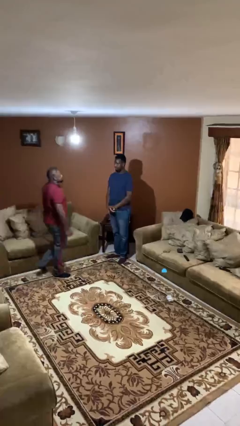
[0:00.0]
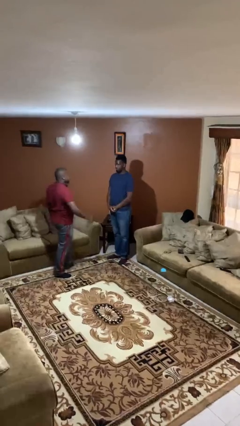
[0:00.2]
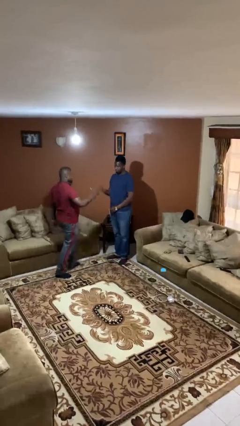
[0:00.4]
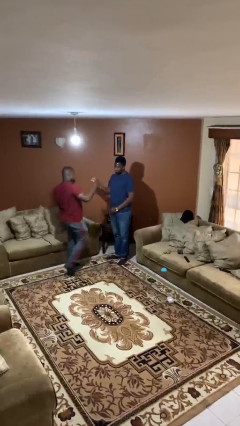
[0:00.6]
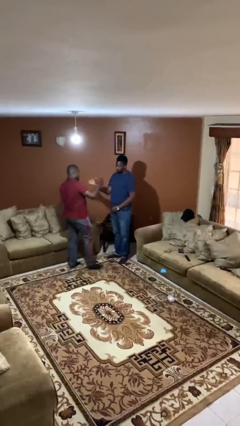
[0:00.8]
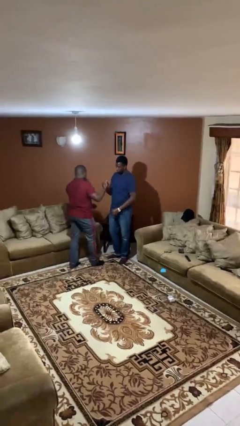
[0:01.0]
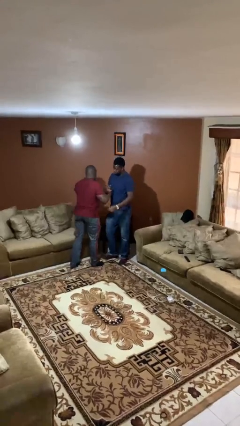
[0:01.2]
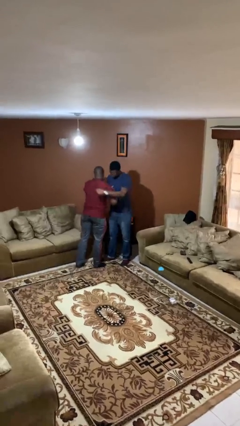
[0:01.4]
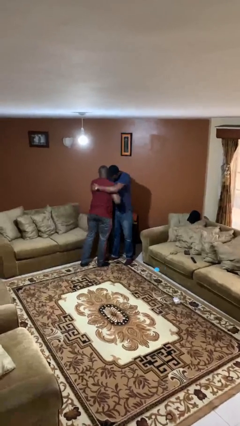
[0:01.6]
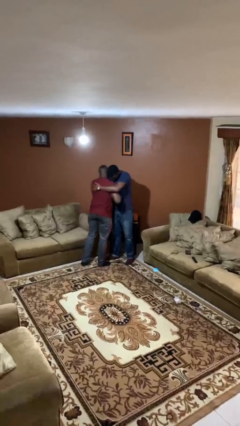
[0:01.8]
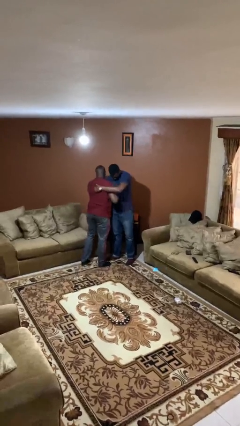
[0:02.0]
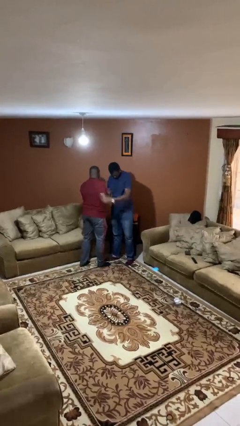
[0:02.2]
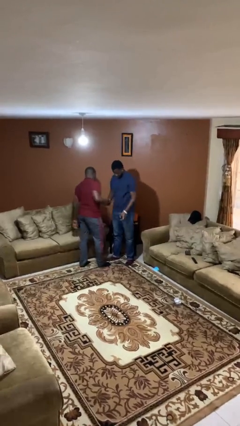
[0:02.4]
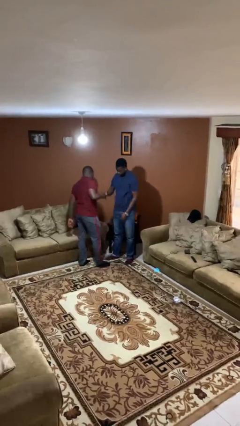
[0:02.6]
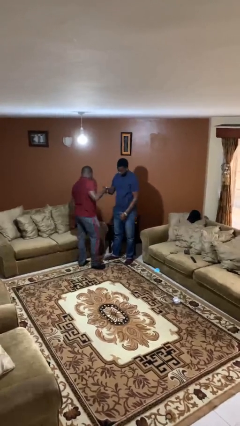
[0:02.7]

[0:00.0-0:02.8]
person embraces person

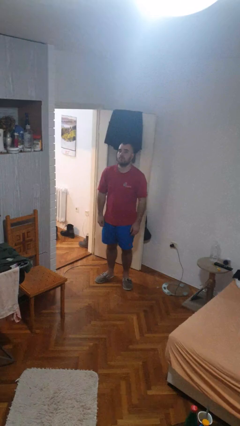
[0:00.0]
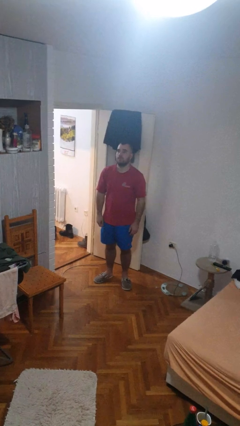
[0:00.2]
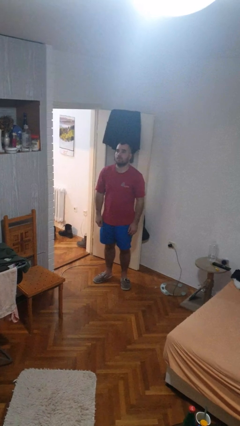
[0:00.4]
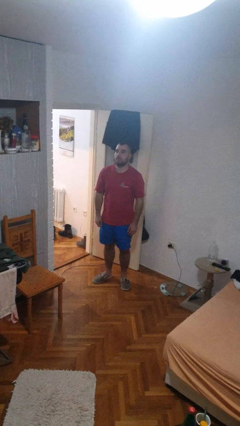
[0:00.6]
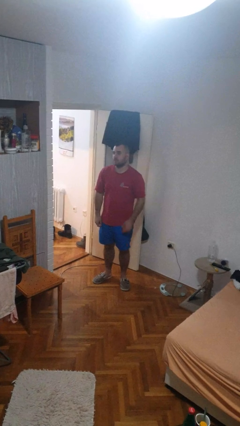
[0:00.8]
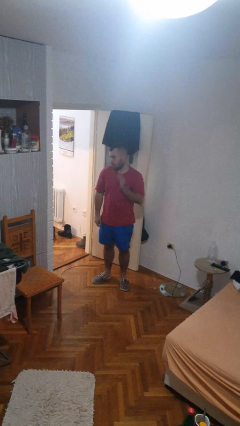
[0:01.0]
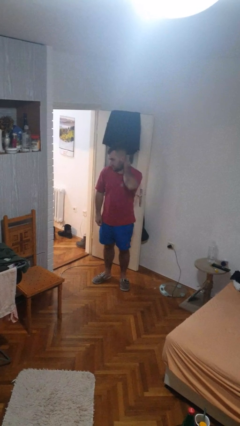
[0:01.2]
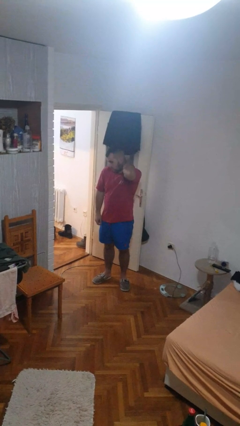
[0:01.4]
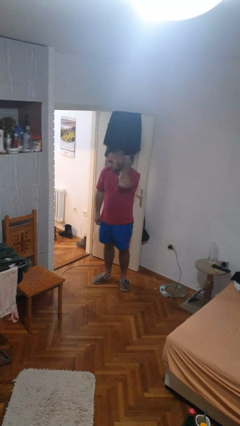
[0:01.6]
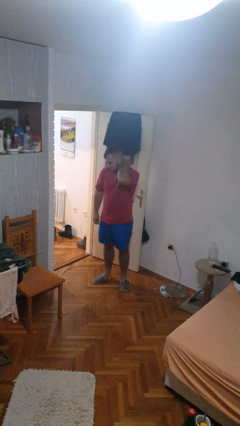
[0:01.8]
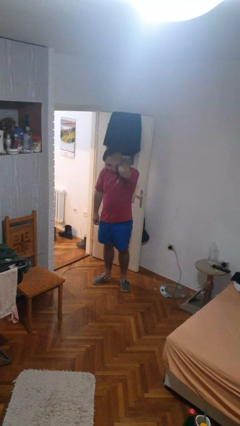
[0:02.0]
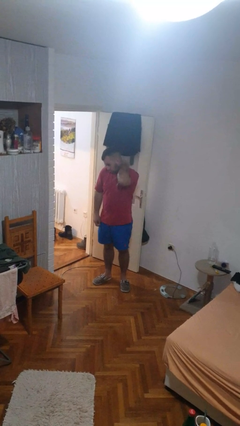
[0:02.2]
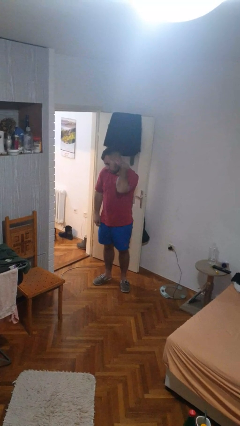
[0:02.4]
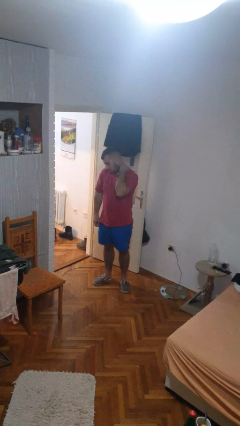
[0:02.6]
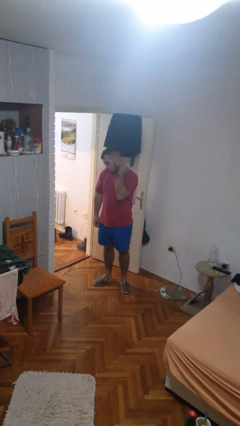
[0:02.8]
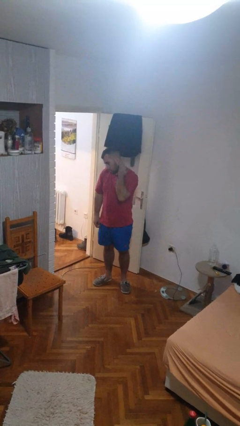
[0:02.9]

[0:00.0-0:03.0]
person rubs neck

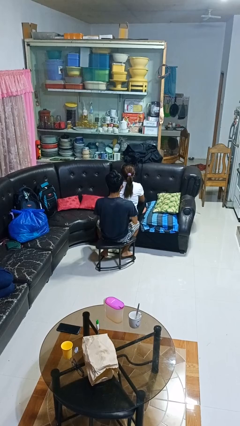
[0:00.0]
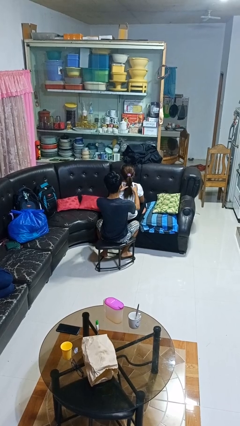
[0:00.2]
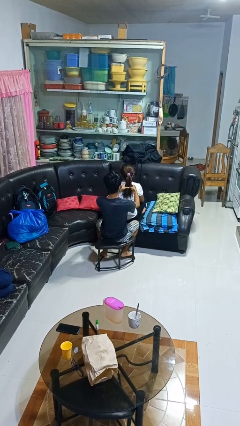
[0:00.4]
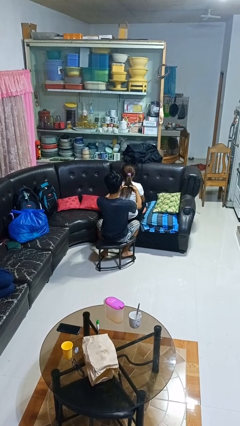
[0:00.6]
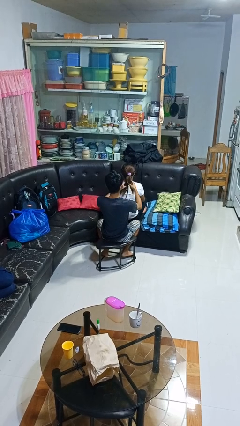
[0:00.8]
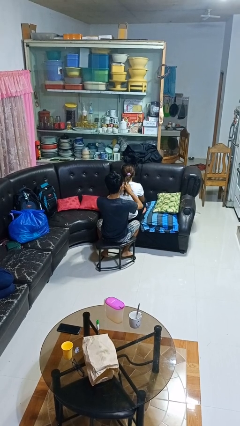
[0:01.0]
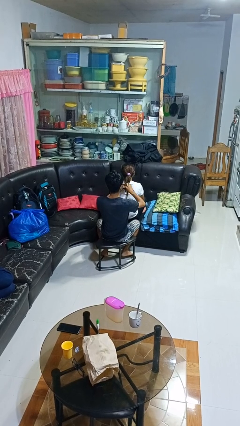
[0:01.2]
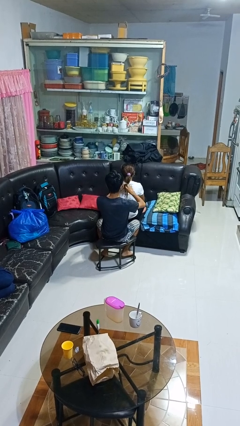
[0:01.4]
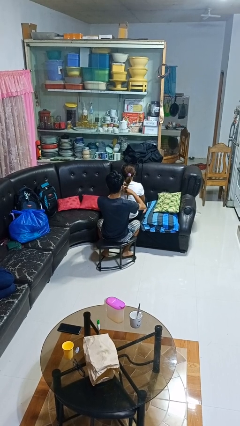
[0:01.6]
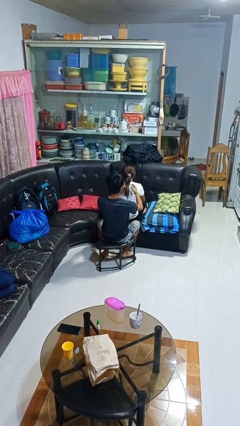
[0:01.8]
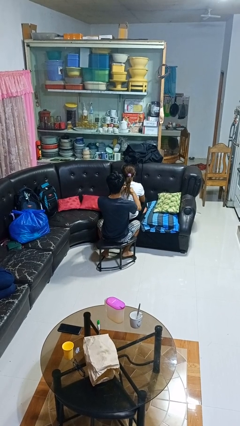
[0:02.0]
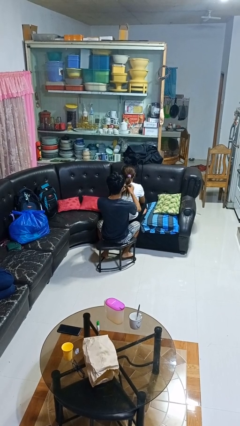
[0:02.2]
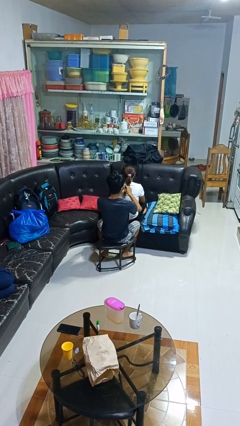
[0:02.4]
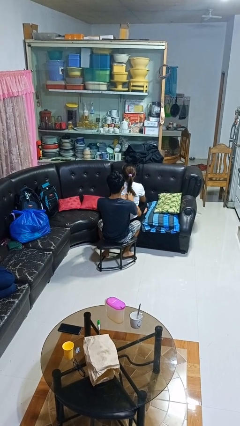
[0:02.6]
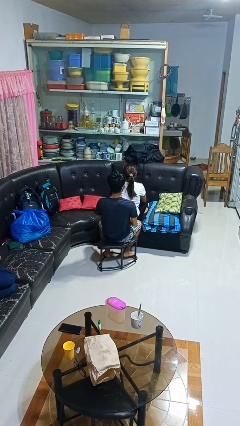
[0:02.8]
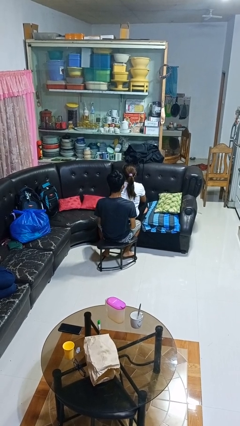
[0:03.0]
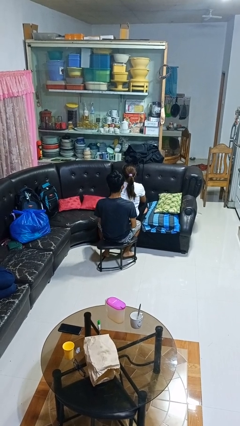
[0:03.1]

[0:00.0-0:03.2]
person braids hair of person

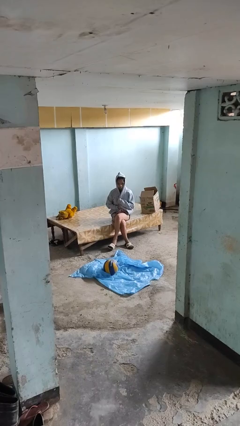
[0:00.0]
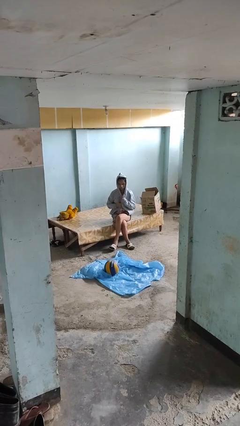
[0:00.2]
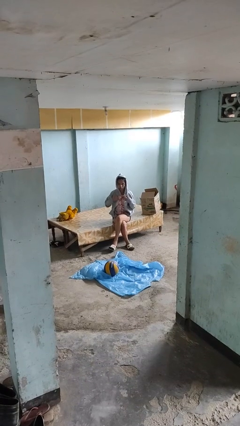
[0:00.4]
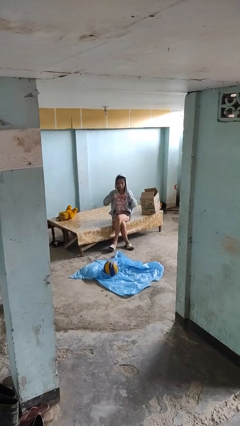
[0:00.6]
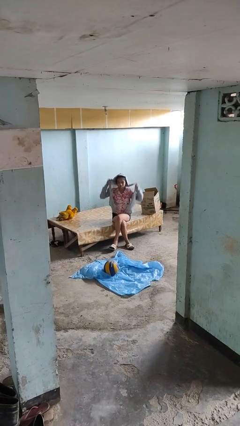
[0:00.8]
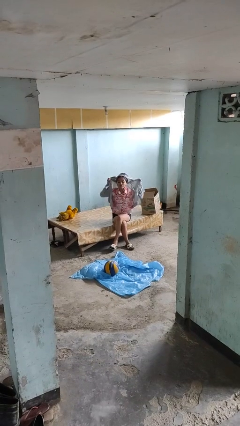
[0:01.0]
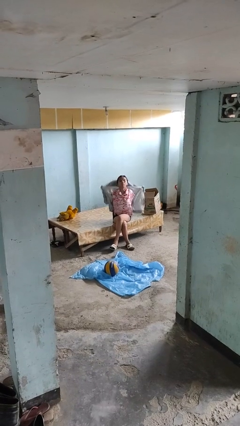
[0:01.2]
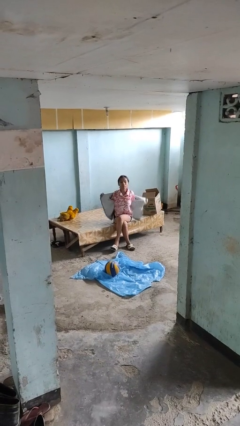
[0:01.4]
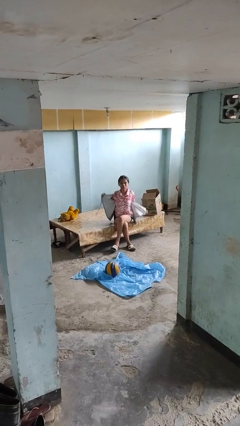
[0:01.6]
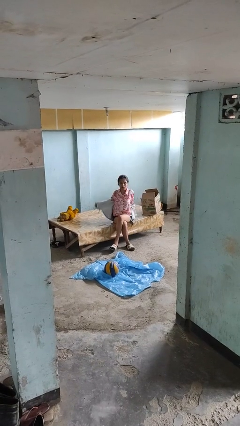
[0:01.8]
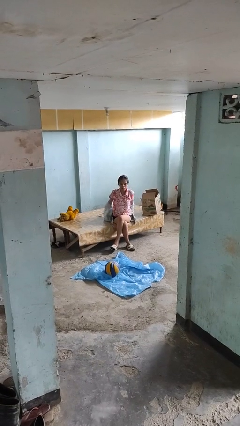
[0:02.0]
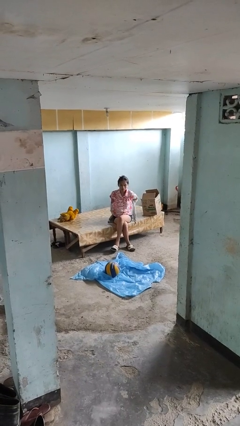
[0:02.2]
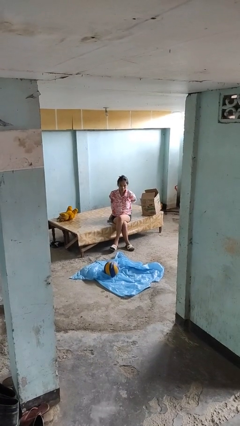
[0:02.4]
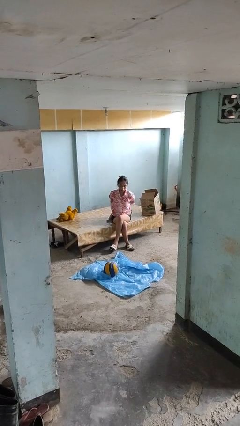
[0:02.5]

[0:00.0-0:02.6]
person takes off hoodie

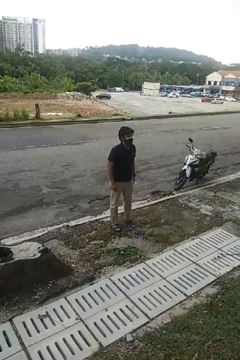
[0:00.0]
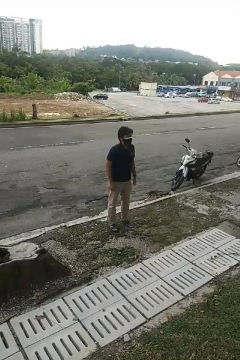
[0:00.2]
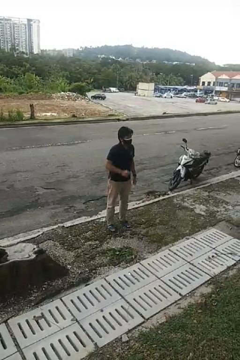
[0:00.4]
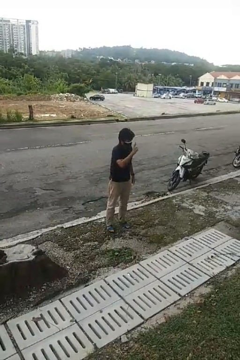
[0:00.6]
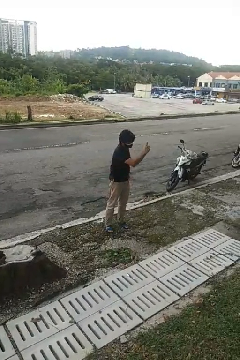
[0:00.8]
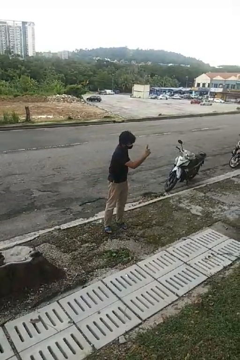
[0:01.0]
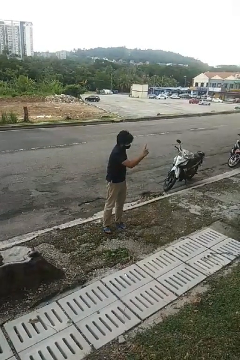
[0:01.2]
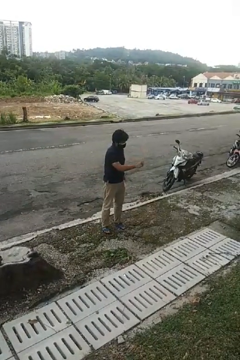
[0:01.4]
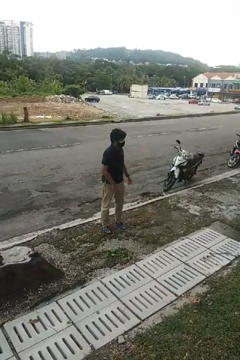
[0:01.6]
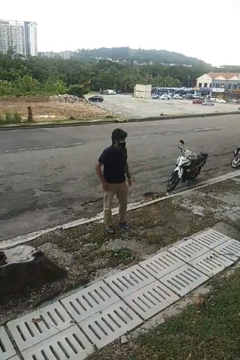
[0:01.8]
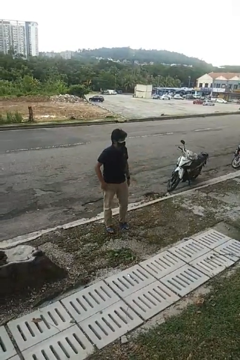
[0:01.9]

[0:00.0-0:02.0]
person gestures number one

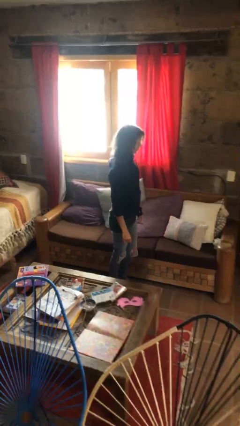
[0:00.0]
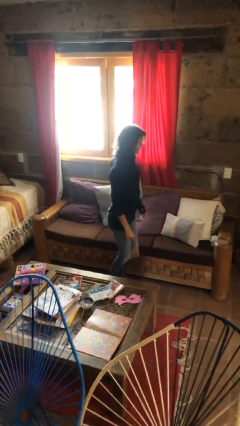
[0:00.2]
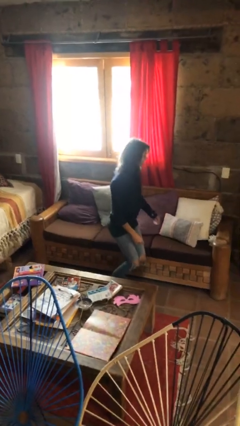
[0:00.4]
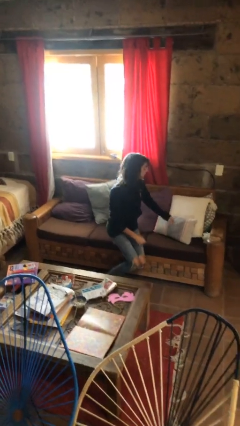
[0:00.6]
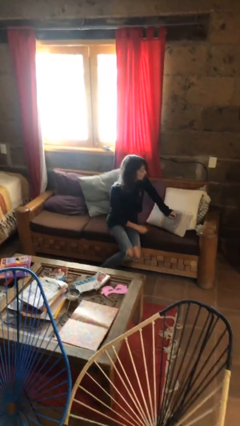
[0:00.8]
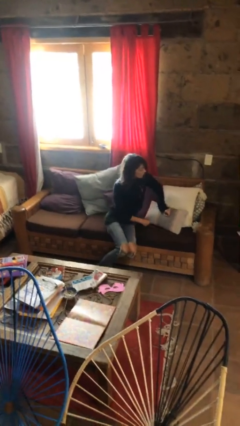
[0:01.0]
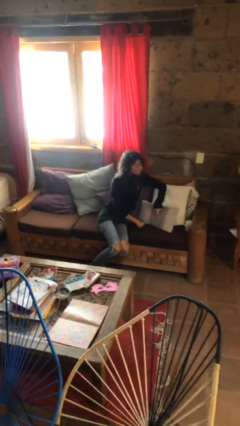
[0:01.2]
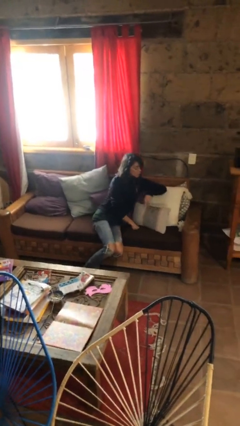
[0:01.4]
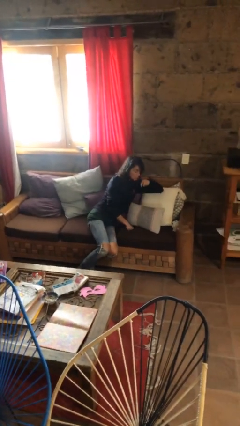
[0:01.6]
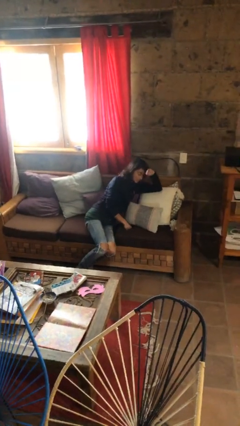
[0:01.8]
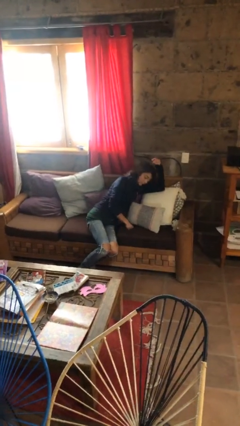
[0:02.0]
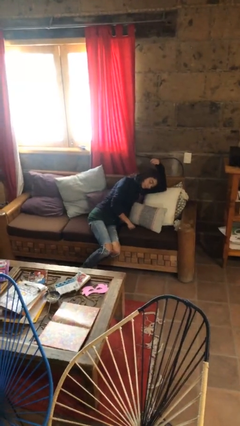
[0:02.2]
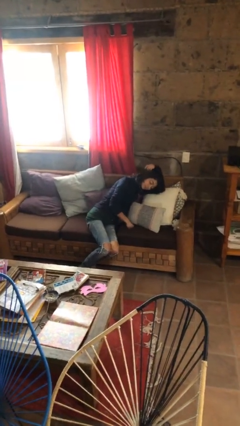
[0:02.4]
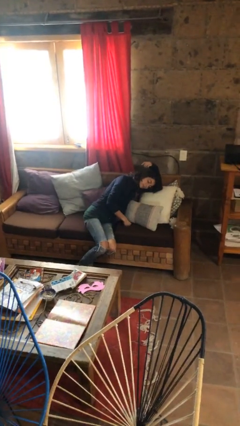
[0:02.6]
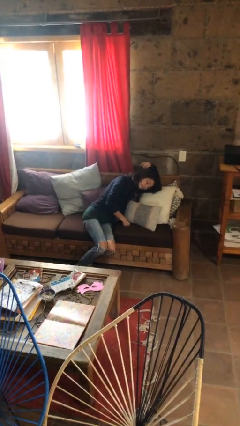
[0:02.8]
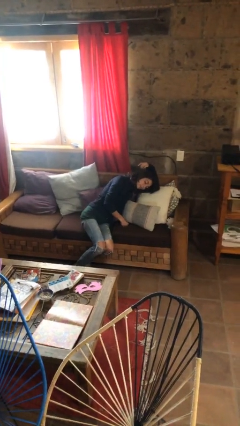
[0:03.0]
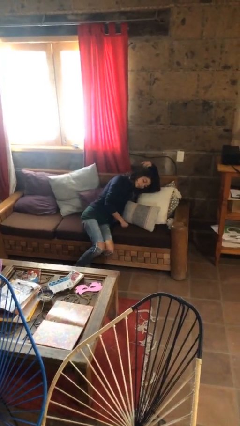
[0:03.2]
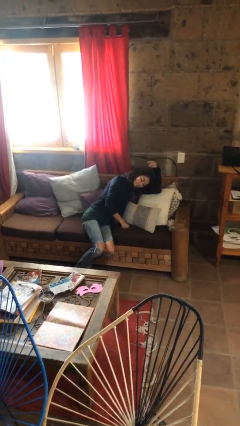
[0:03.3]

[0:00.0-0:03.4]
person lies down on couch

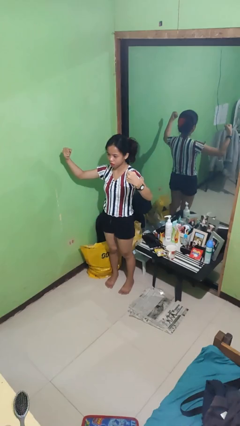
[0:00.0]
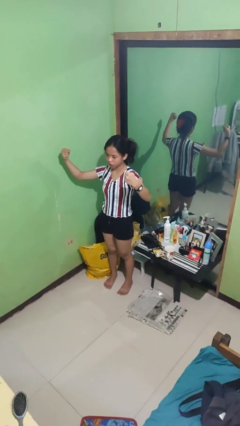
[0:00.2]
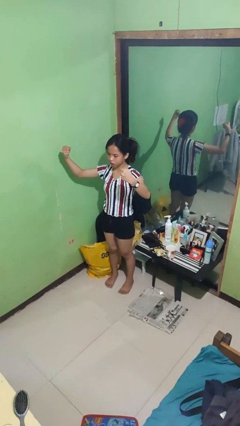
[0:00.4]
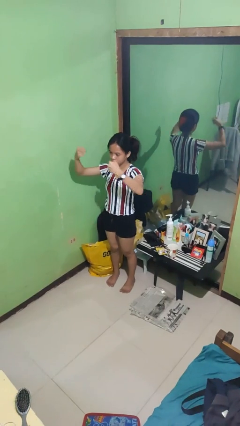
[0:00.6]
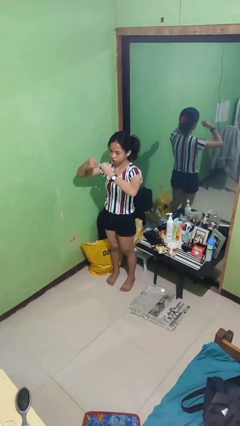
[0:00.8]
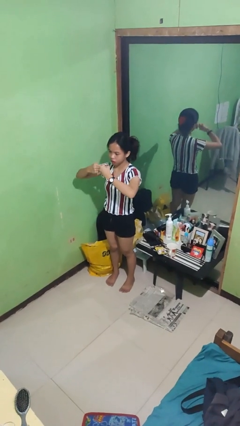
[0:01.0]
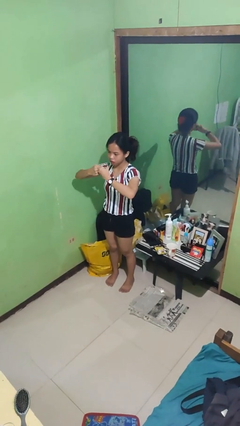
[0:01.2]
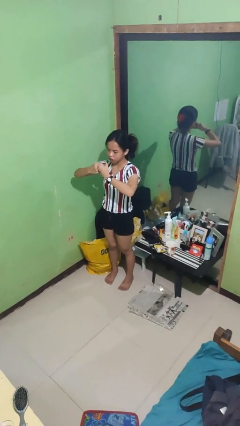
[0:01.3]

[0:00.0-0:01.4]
person gestures zoom out
